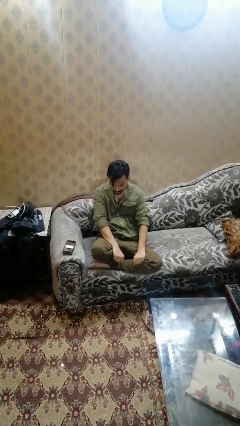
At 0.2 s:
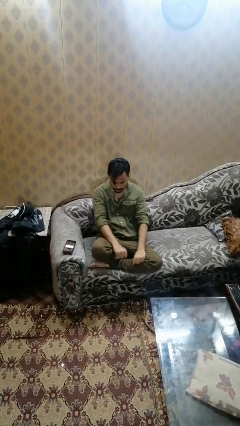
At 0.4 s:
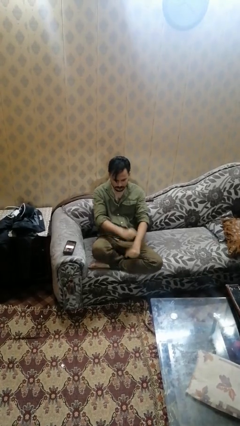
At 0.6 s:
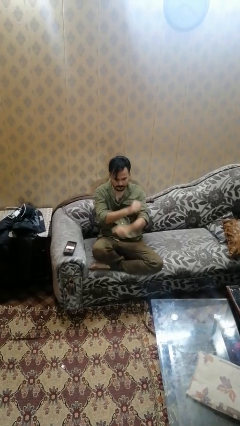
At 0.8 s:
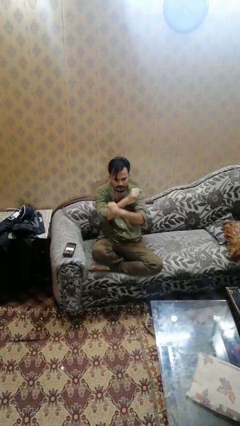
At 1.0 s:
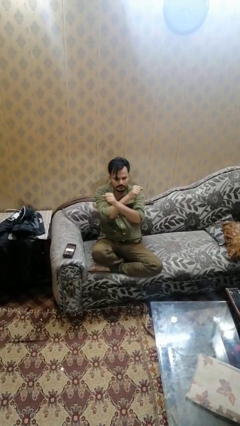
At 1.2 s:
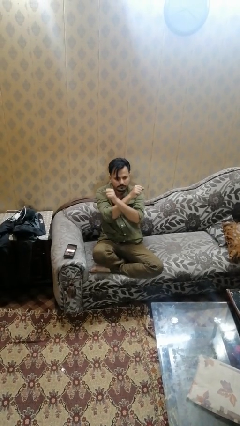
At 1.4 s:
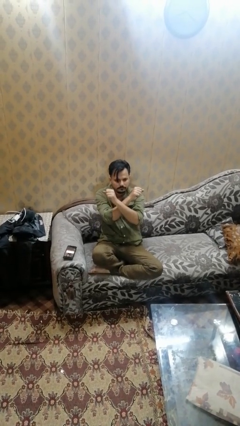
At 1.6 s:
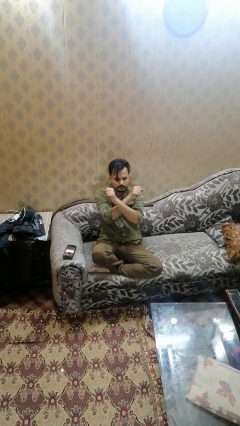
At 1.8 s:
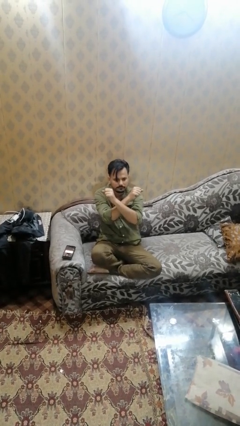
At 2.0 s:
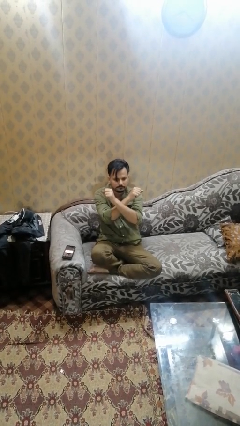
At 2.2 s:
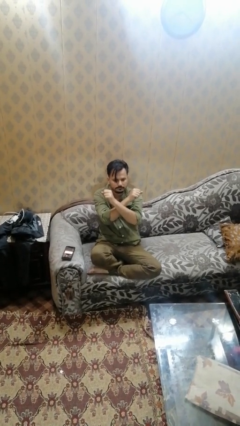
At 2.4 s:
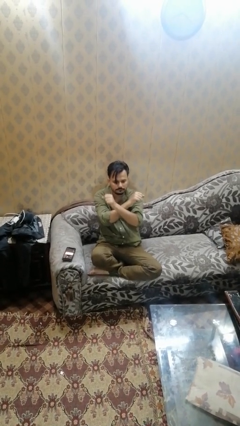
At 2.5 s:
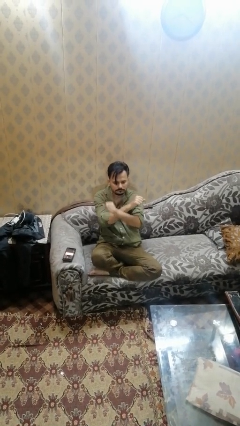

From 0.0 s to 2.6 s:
person gestures arms x

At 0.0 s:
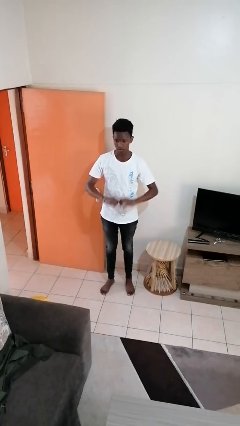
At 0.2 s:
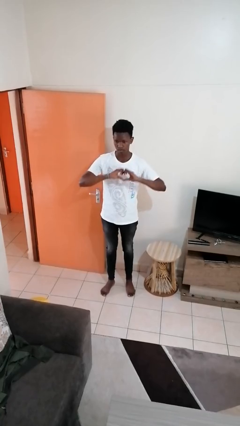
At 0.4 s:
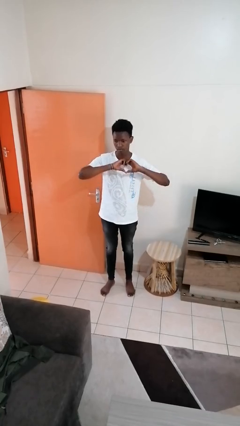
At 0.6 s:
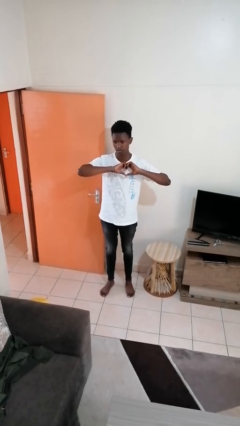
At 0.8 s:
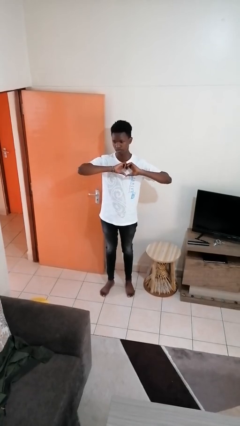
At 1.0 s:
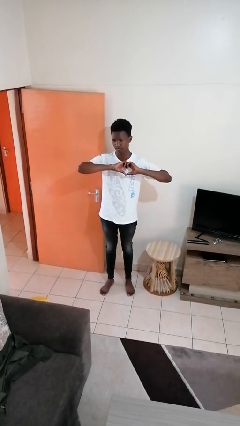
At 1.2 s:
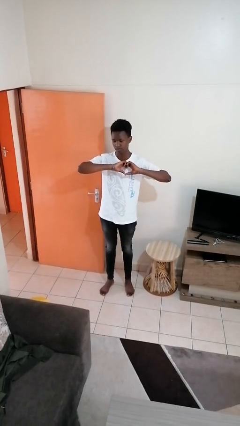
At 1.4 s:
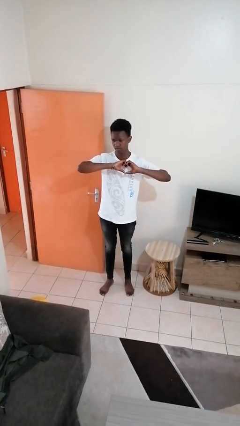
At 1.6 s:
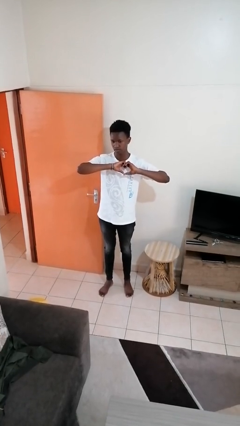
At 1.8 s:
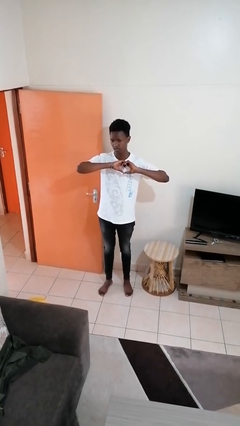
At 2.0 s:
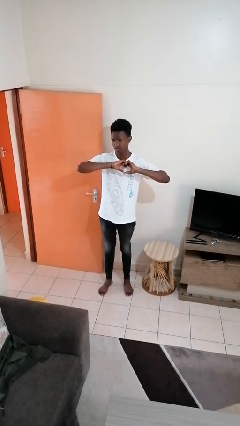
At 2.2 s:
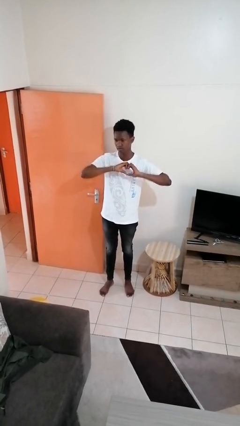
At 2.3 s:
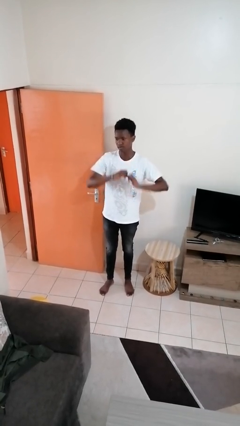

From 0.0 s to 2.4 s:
person gestures heart

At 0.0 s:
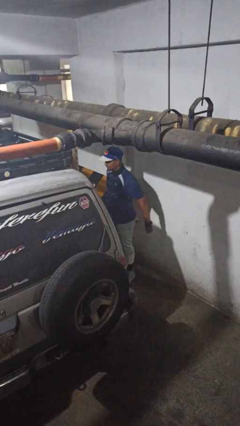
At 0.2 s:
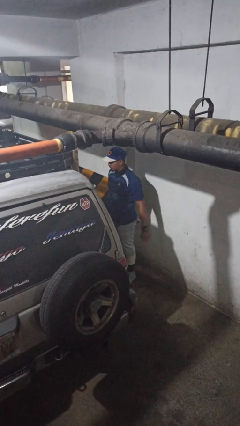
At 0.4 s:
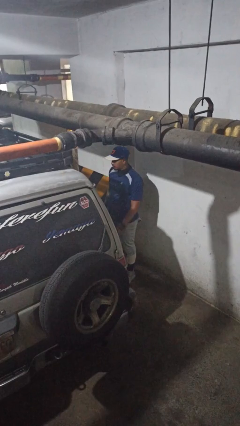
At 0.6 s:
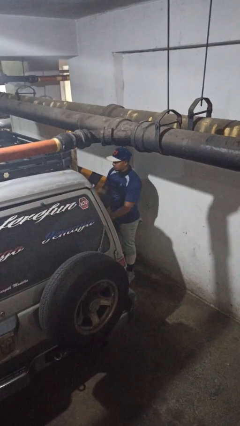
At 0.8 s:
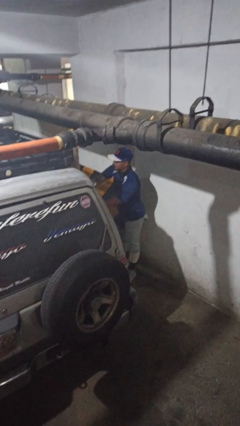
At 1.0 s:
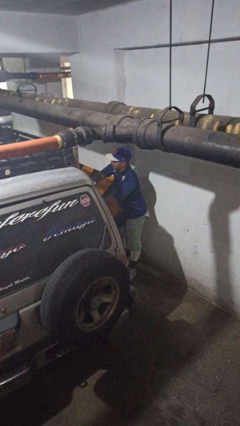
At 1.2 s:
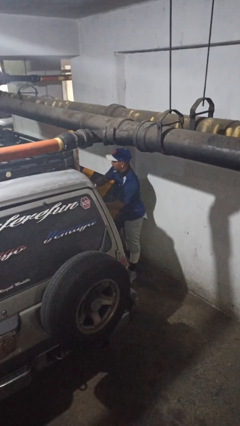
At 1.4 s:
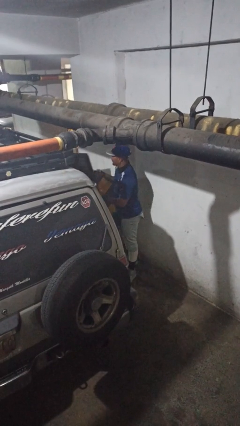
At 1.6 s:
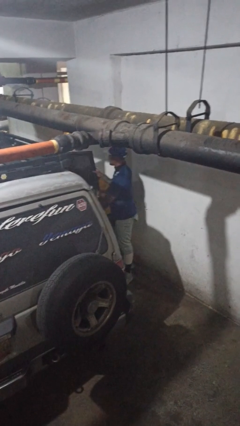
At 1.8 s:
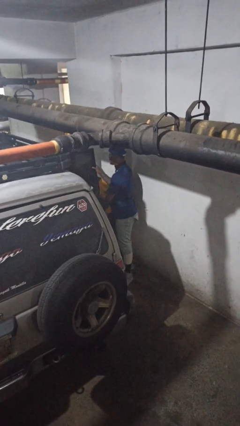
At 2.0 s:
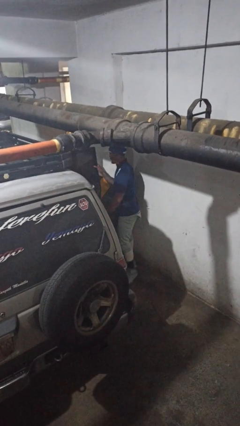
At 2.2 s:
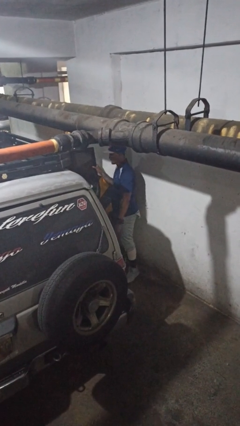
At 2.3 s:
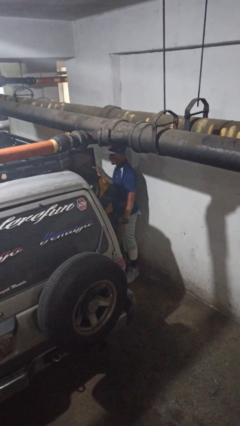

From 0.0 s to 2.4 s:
person opens car door

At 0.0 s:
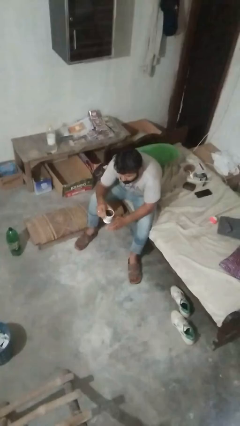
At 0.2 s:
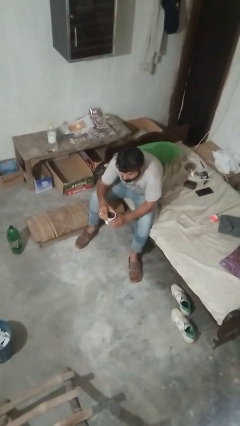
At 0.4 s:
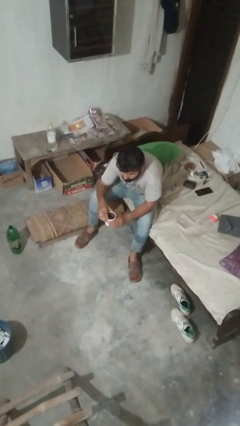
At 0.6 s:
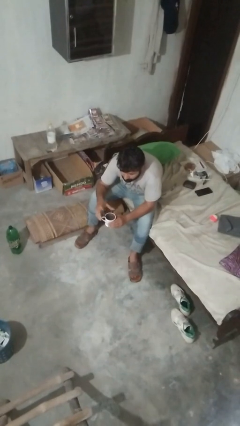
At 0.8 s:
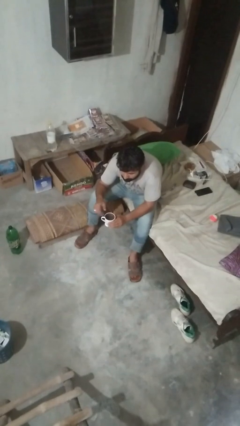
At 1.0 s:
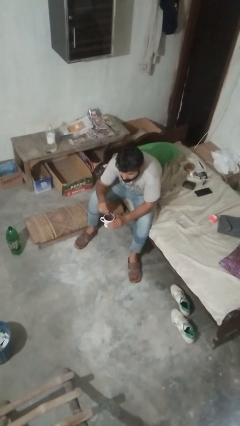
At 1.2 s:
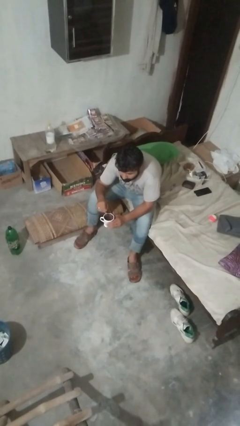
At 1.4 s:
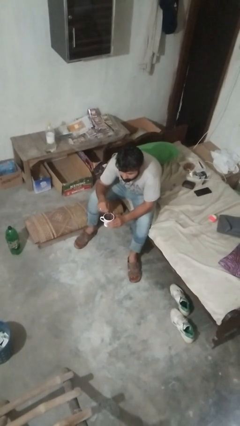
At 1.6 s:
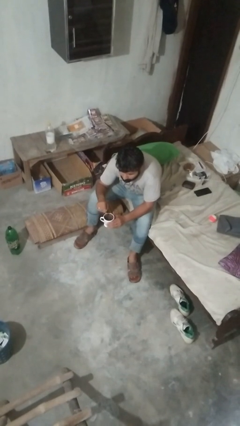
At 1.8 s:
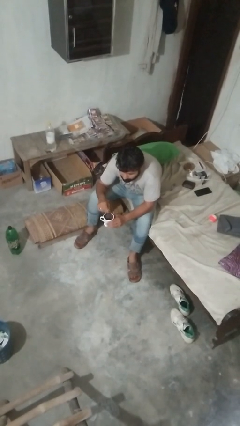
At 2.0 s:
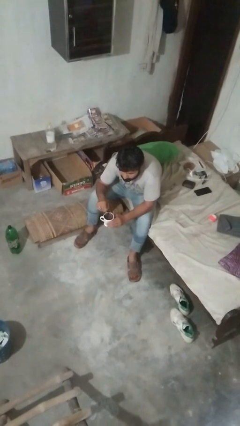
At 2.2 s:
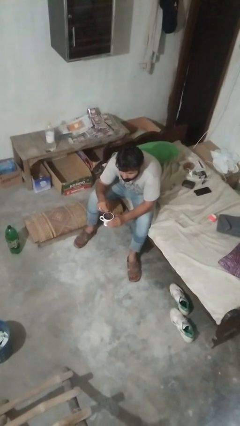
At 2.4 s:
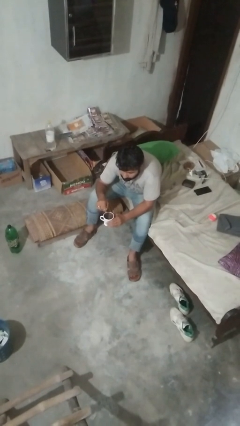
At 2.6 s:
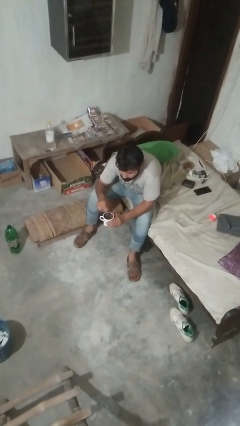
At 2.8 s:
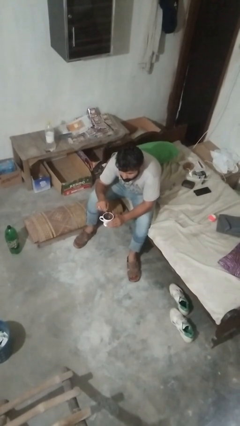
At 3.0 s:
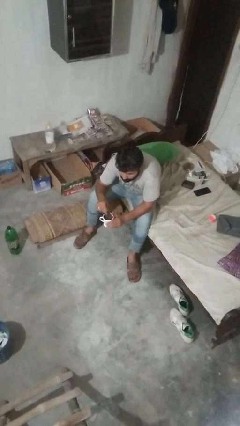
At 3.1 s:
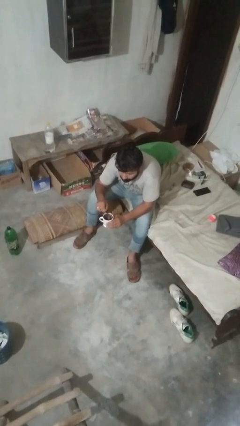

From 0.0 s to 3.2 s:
person stirs mug

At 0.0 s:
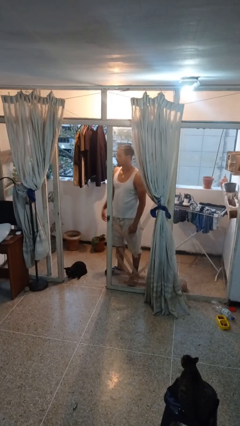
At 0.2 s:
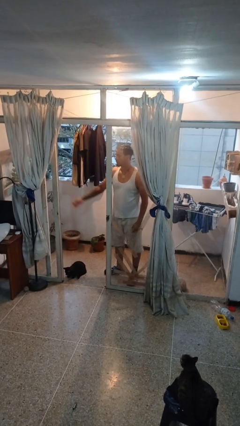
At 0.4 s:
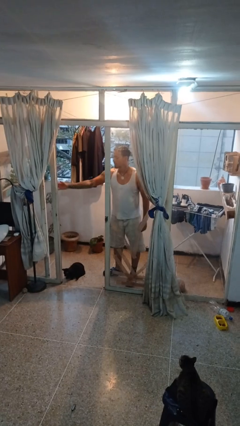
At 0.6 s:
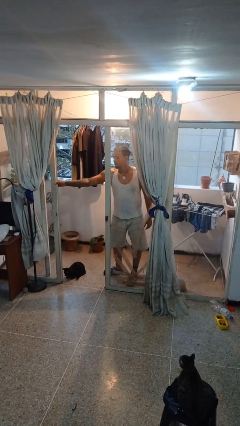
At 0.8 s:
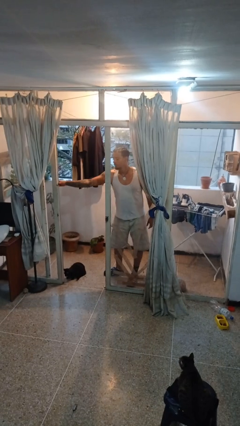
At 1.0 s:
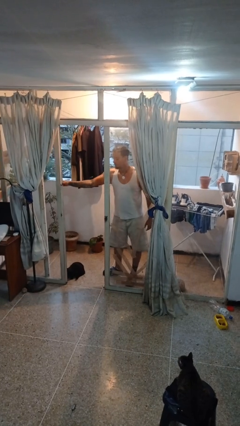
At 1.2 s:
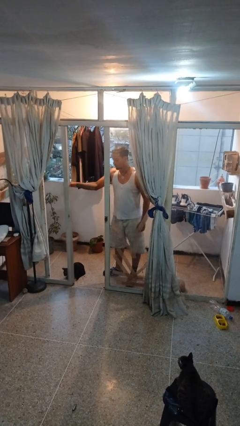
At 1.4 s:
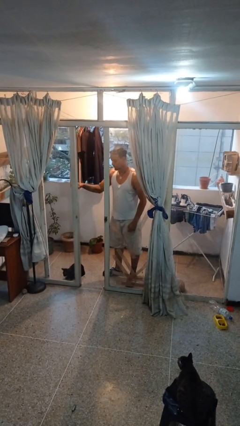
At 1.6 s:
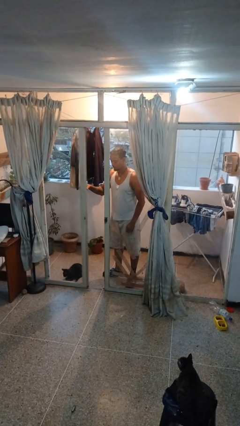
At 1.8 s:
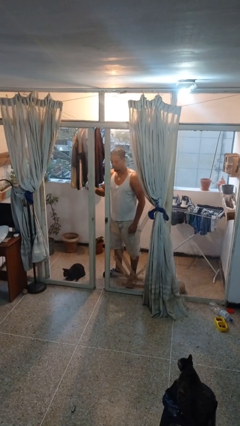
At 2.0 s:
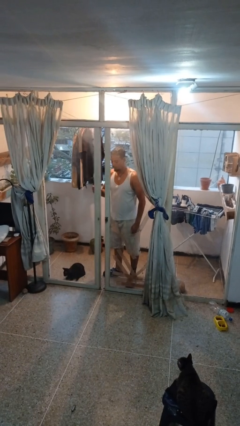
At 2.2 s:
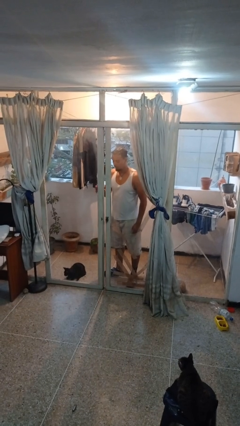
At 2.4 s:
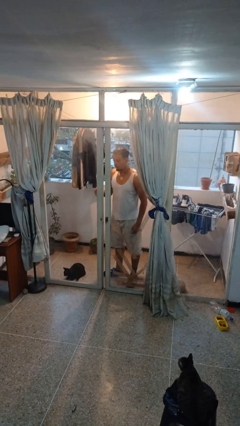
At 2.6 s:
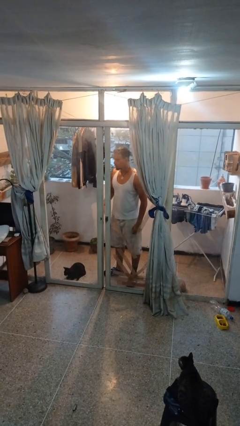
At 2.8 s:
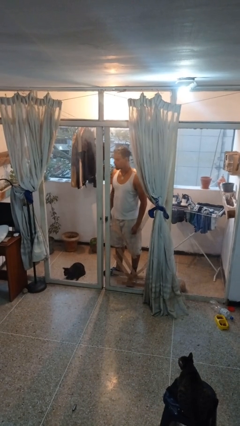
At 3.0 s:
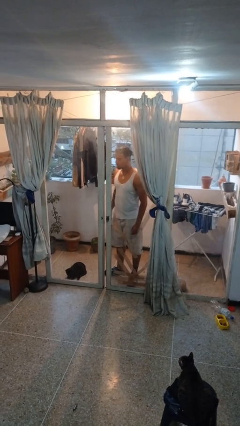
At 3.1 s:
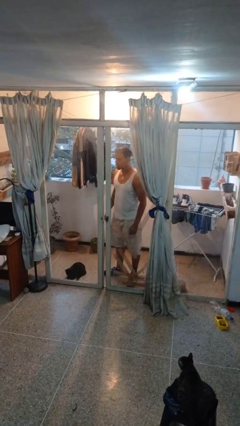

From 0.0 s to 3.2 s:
person closes sliding door

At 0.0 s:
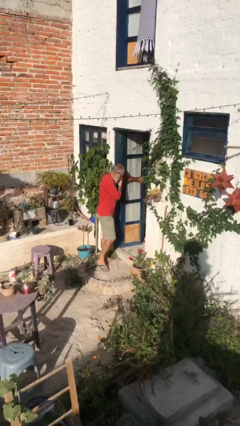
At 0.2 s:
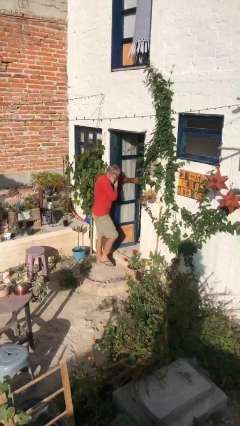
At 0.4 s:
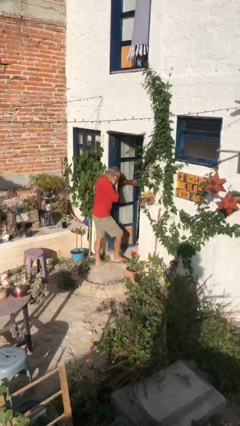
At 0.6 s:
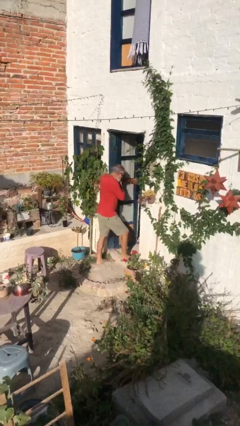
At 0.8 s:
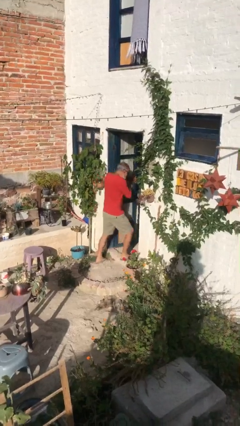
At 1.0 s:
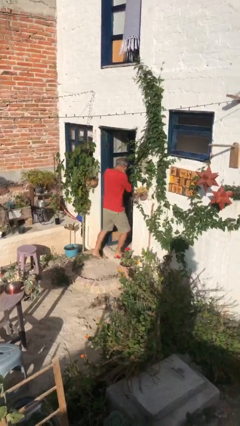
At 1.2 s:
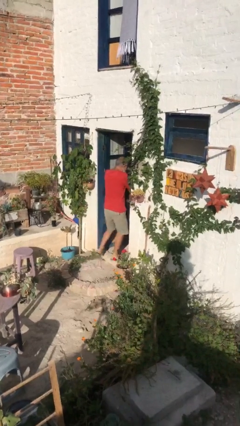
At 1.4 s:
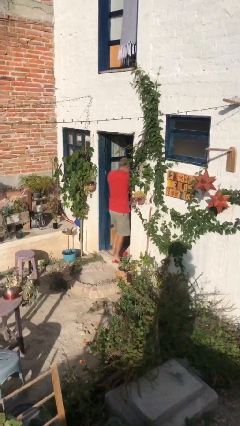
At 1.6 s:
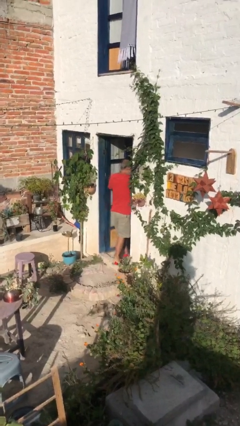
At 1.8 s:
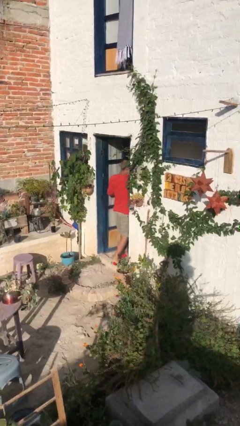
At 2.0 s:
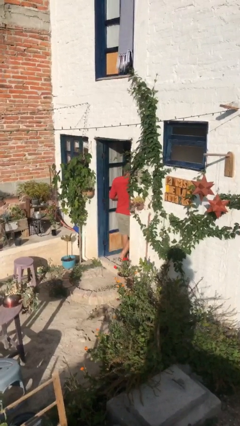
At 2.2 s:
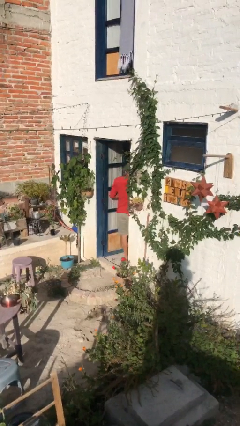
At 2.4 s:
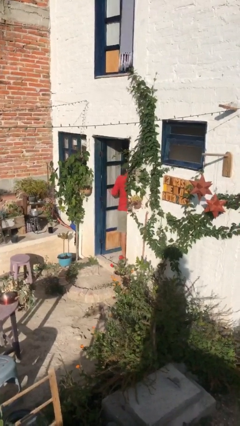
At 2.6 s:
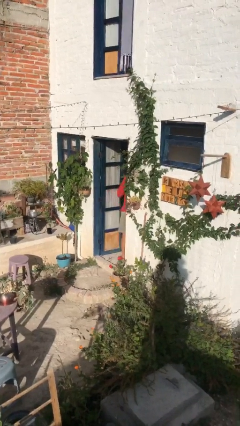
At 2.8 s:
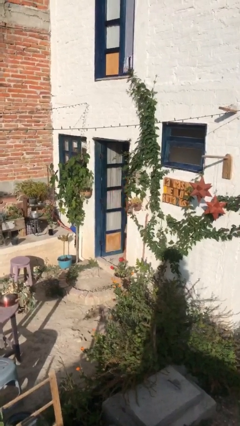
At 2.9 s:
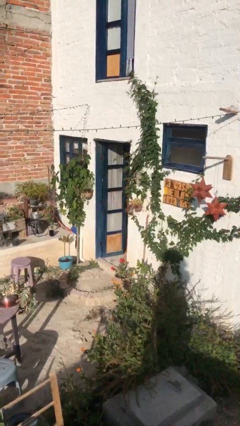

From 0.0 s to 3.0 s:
person exits scene through structure

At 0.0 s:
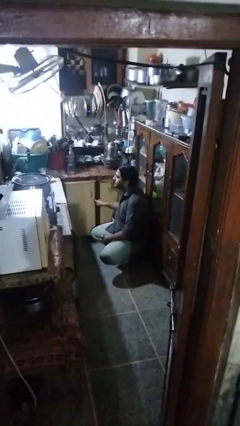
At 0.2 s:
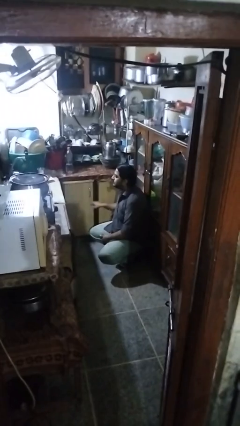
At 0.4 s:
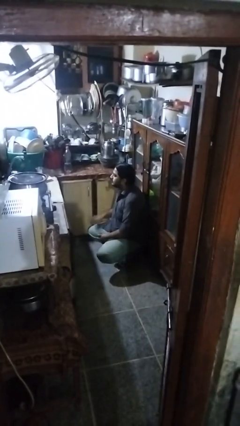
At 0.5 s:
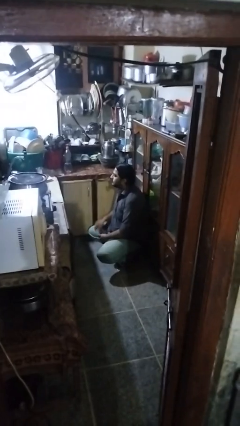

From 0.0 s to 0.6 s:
person closes cabinet
